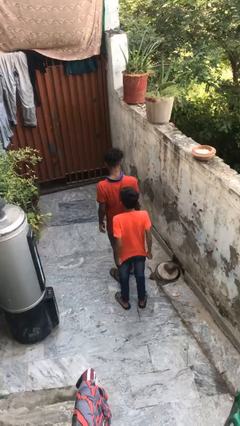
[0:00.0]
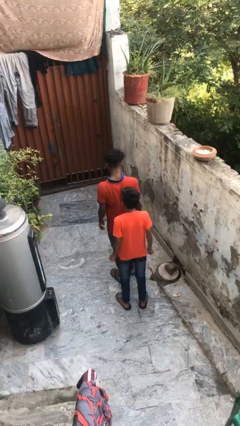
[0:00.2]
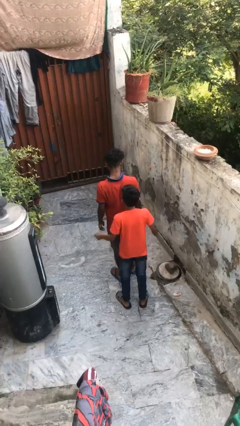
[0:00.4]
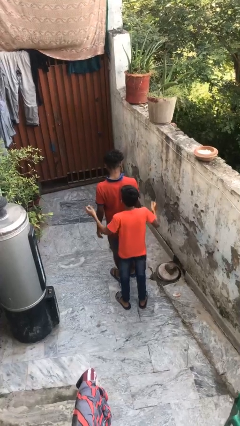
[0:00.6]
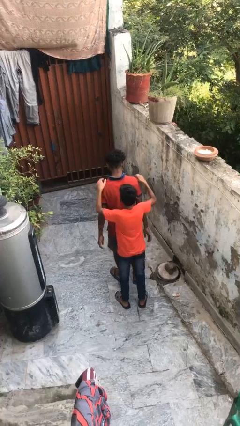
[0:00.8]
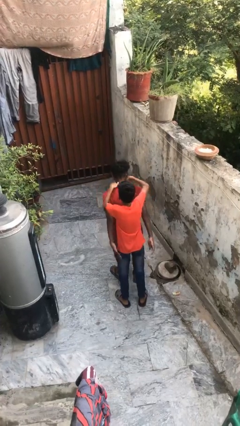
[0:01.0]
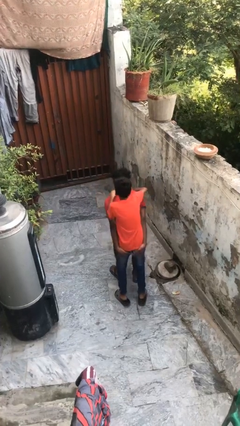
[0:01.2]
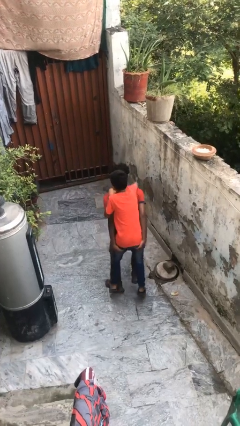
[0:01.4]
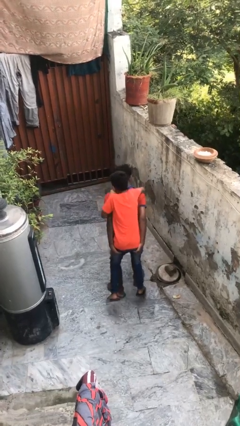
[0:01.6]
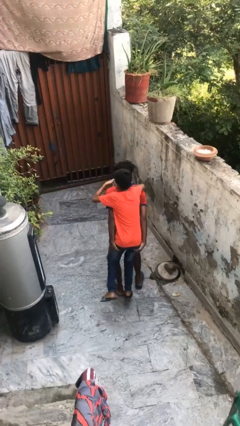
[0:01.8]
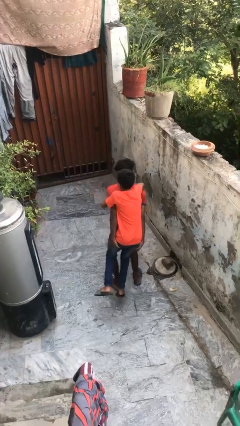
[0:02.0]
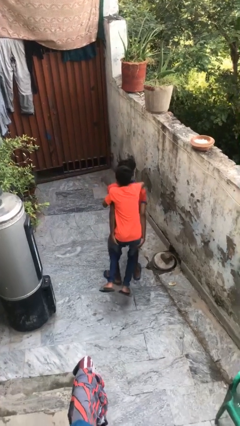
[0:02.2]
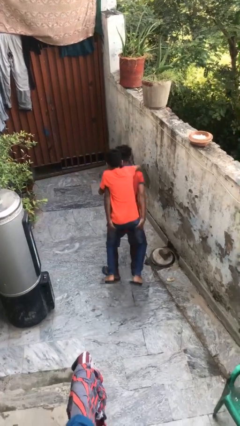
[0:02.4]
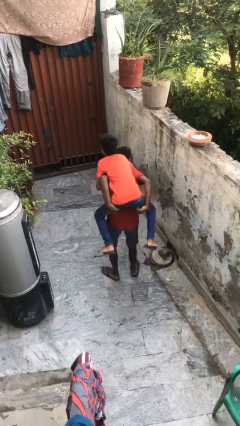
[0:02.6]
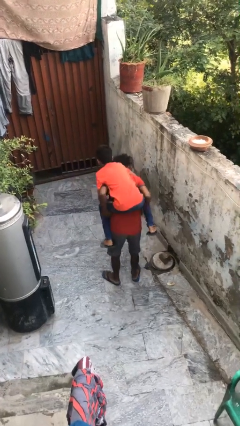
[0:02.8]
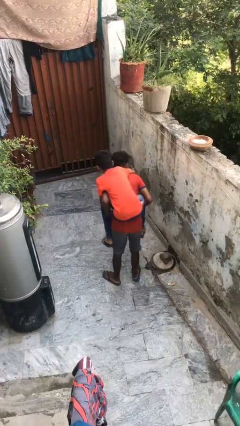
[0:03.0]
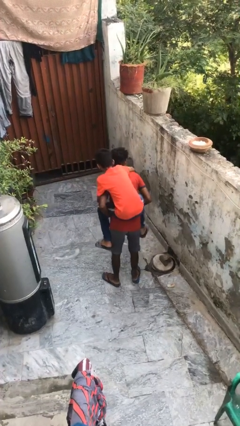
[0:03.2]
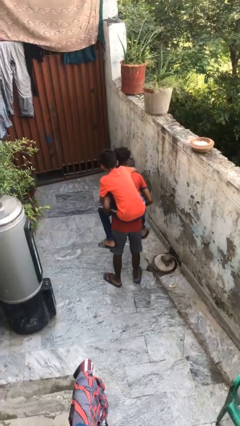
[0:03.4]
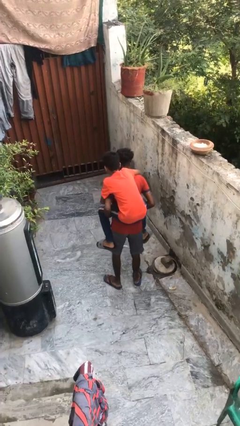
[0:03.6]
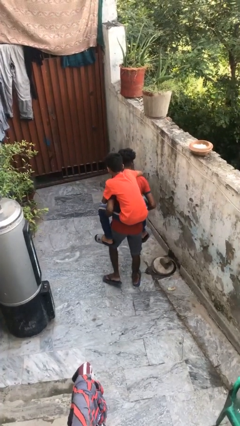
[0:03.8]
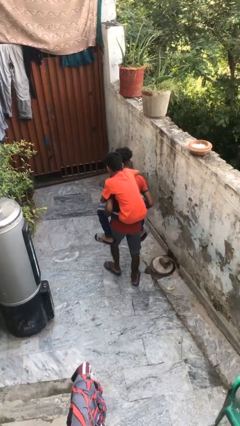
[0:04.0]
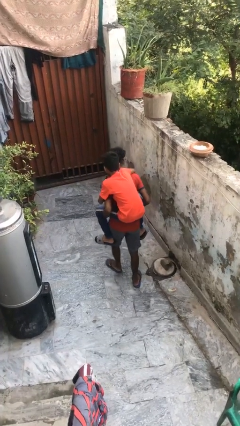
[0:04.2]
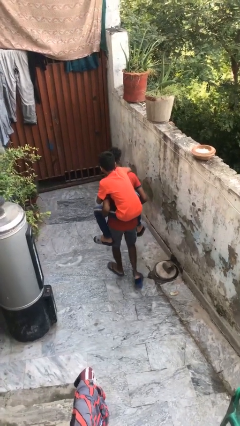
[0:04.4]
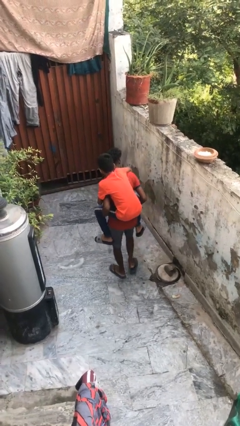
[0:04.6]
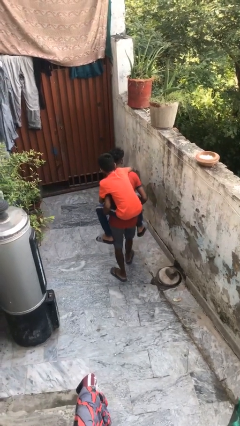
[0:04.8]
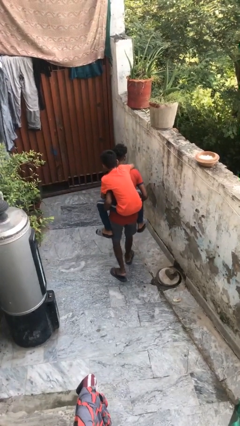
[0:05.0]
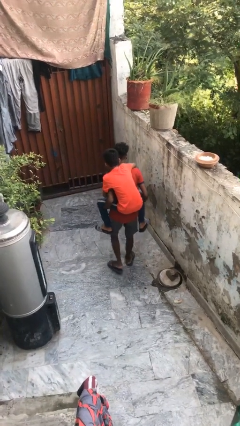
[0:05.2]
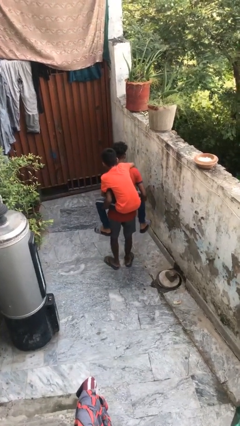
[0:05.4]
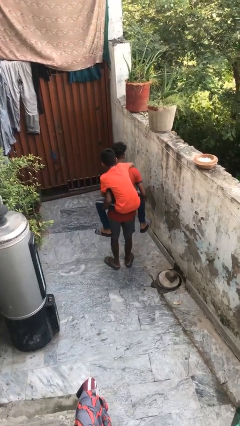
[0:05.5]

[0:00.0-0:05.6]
person carries person on back

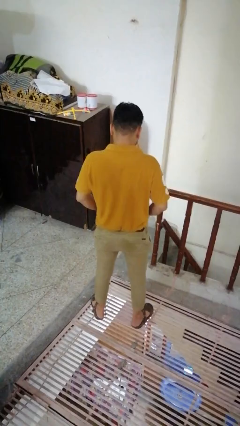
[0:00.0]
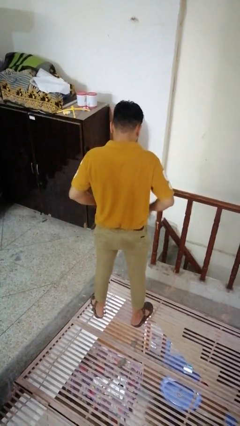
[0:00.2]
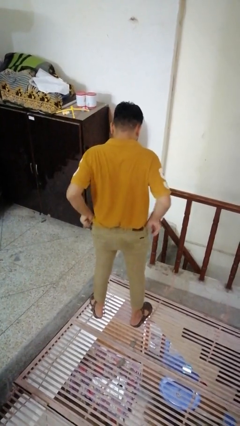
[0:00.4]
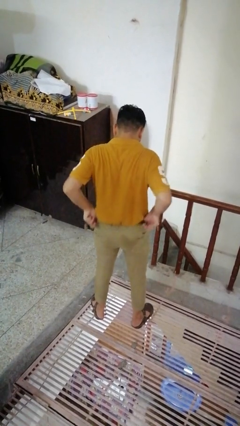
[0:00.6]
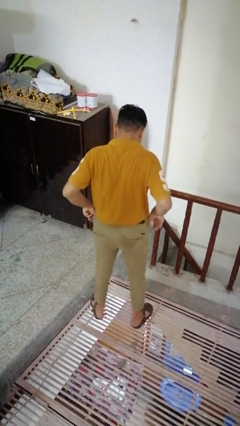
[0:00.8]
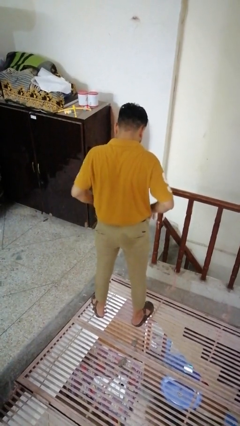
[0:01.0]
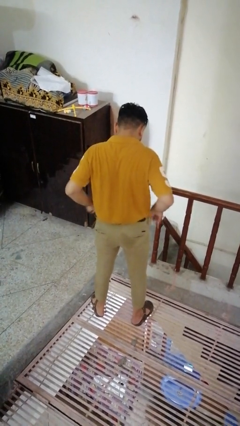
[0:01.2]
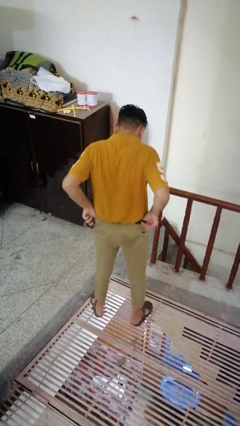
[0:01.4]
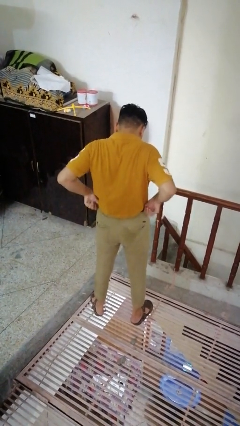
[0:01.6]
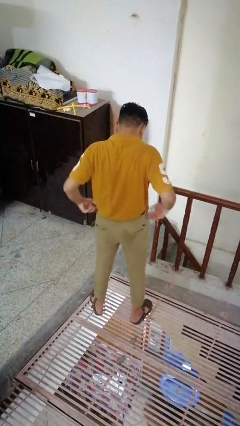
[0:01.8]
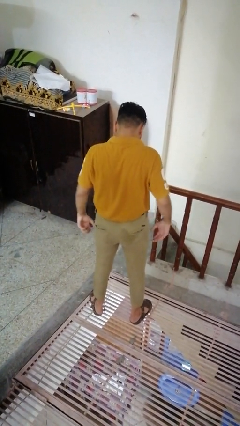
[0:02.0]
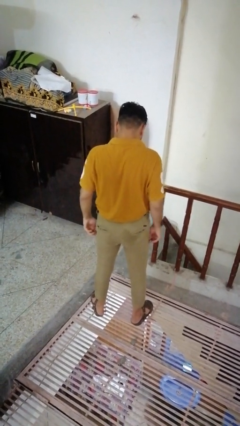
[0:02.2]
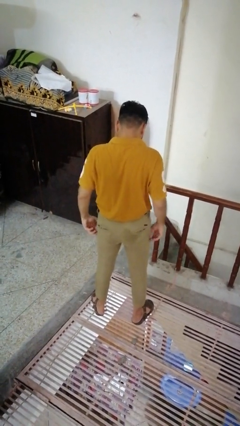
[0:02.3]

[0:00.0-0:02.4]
person hikes up pants

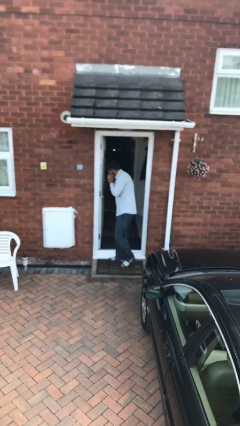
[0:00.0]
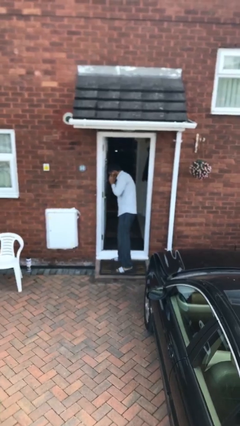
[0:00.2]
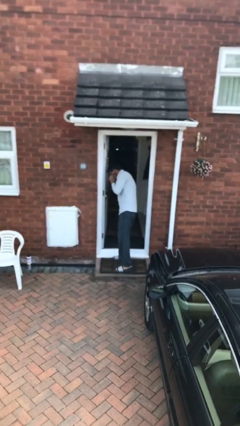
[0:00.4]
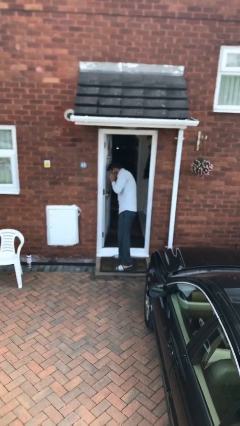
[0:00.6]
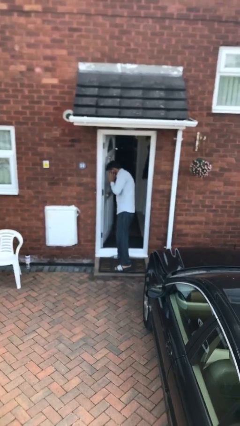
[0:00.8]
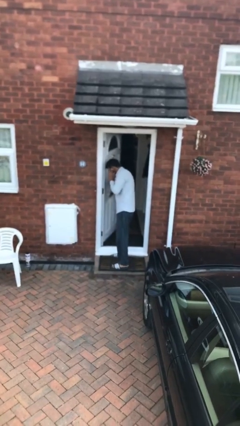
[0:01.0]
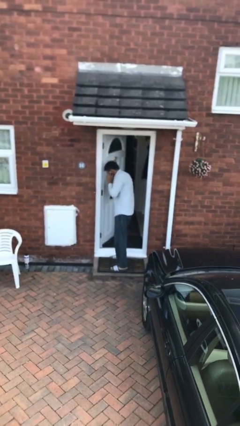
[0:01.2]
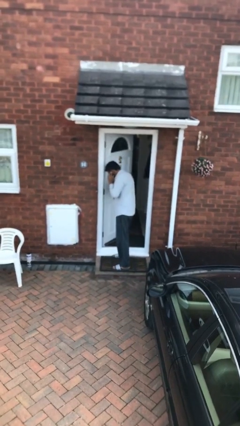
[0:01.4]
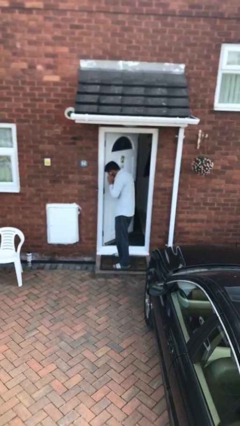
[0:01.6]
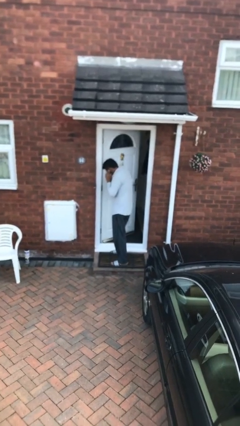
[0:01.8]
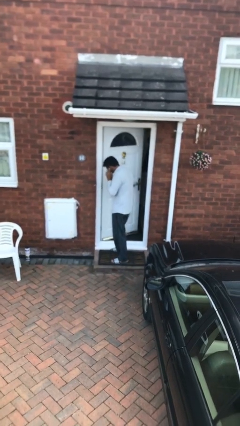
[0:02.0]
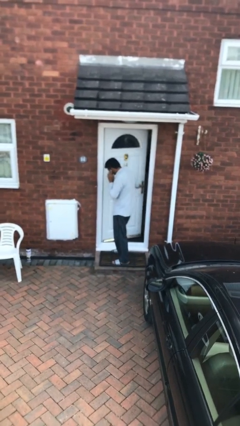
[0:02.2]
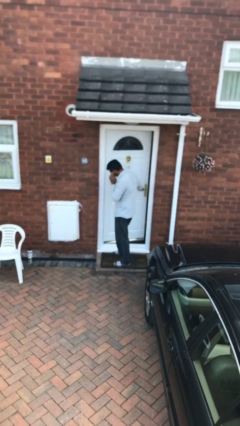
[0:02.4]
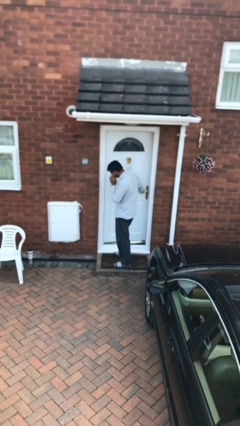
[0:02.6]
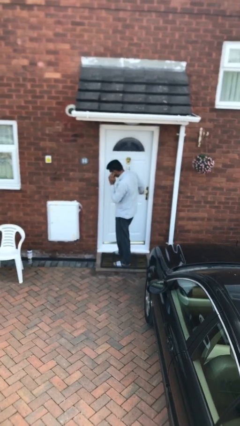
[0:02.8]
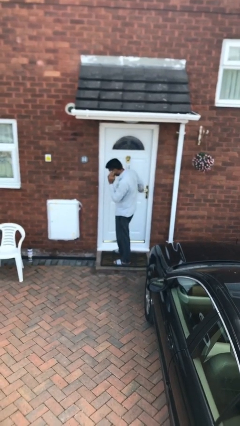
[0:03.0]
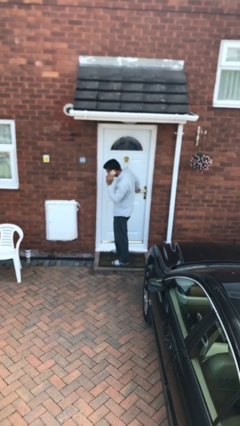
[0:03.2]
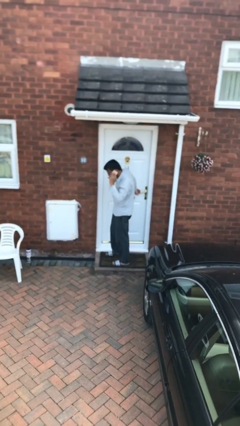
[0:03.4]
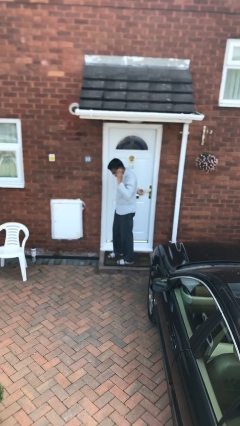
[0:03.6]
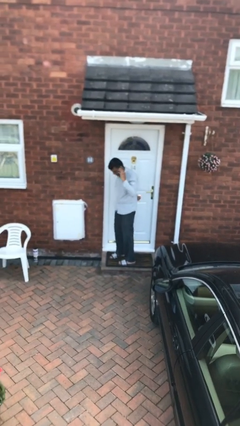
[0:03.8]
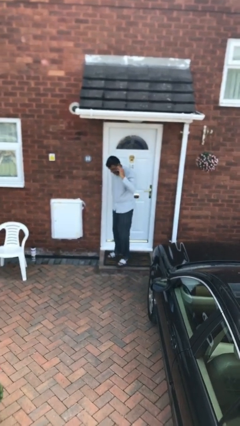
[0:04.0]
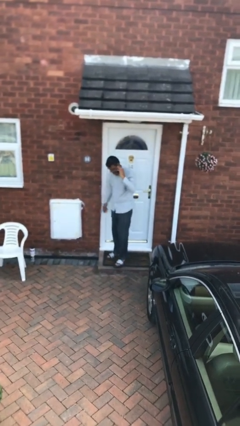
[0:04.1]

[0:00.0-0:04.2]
person closes facility door

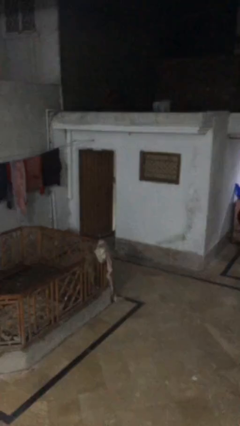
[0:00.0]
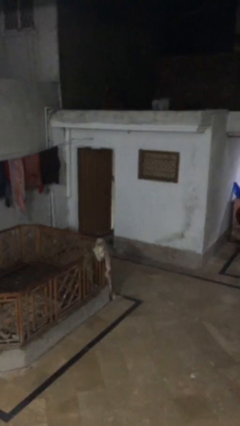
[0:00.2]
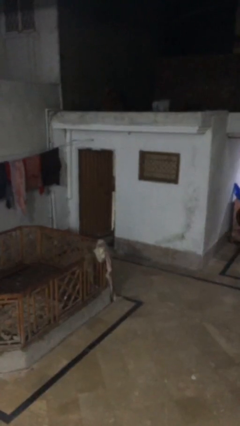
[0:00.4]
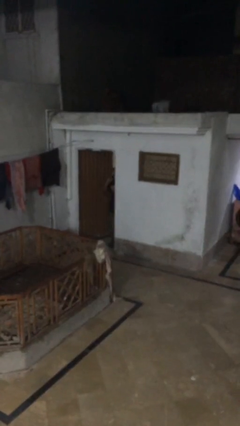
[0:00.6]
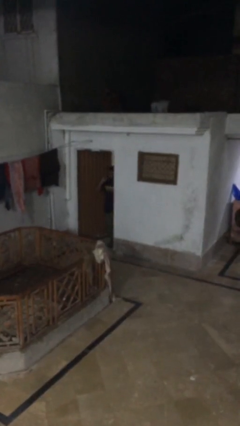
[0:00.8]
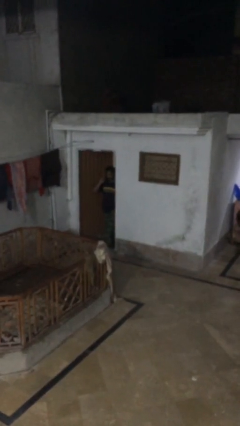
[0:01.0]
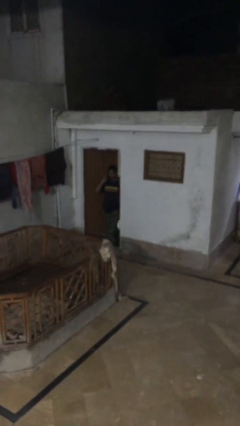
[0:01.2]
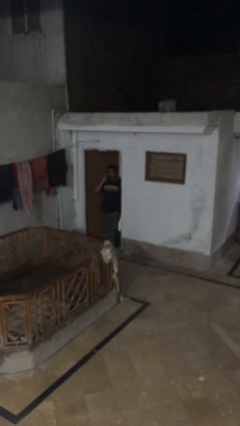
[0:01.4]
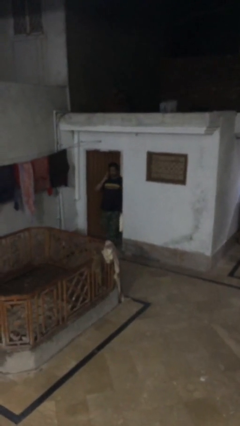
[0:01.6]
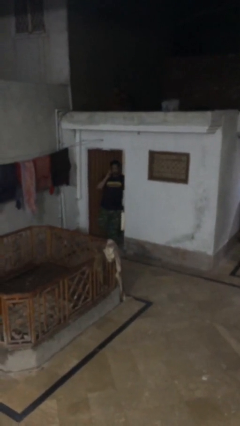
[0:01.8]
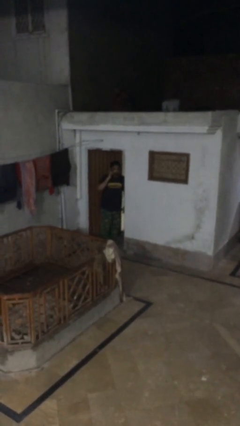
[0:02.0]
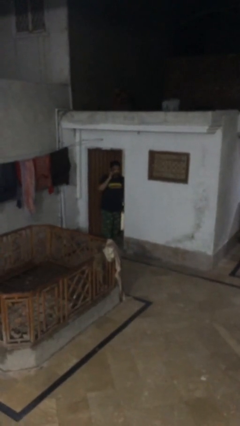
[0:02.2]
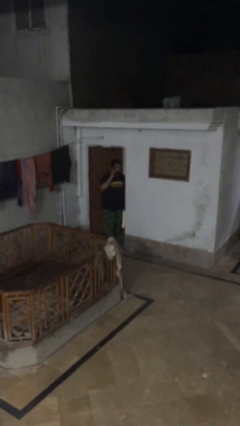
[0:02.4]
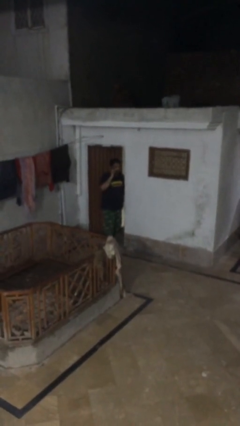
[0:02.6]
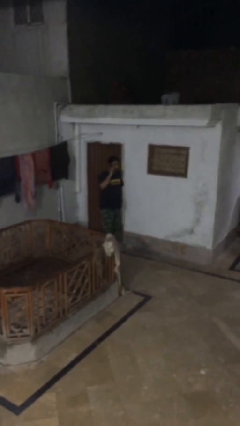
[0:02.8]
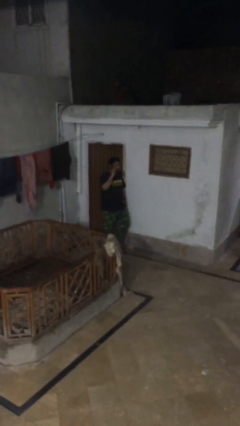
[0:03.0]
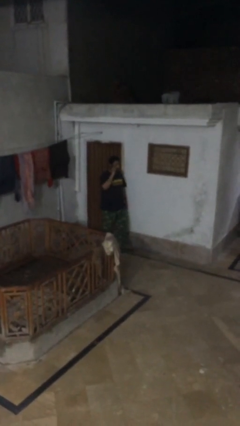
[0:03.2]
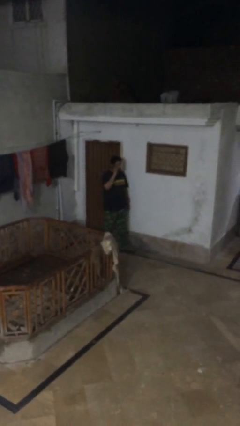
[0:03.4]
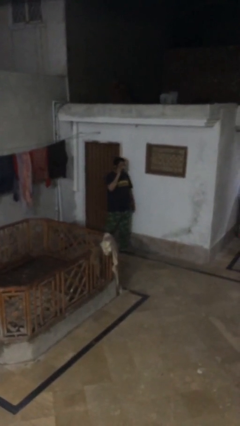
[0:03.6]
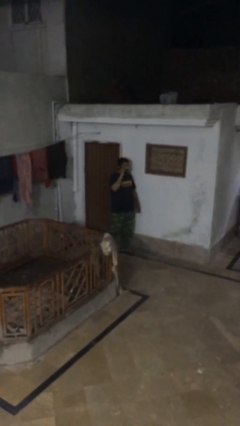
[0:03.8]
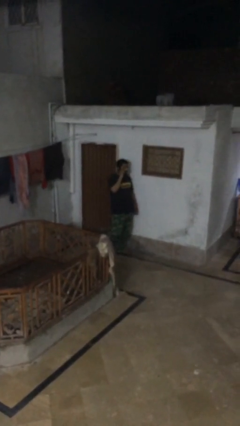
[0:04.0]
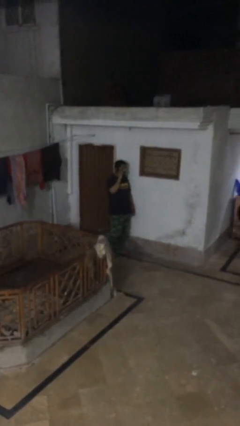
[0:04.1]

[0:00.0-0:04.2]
person enters scene through structure

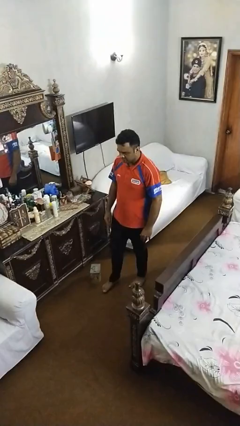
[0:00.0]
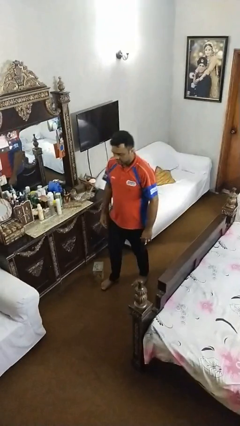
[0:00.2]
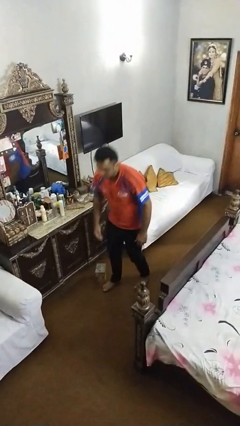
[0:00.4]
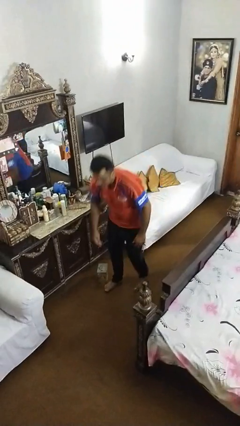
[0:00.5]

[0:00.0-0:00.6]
person trips on object on floor

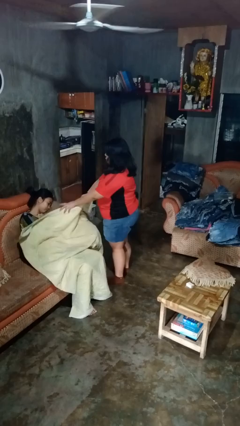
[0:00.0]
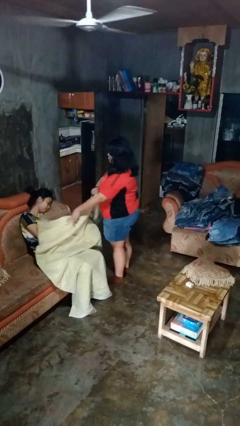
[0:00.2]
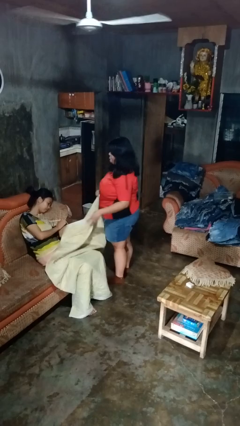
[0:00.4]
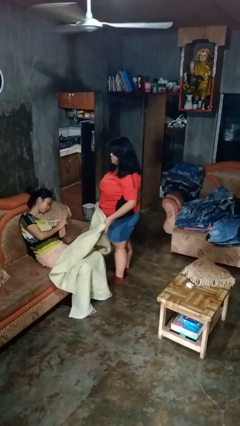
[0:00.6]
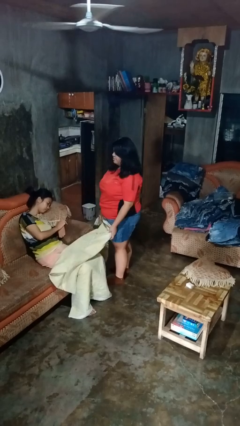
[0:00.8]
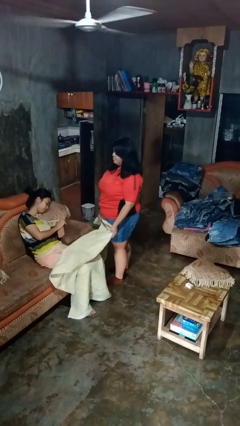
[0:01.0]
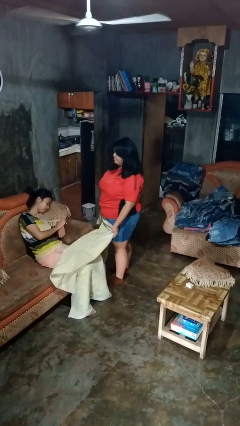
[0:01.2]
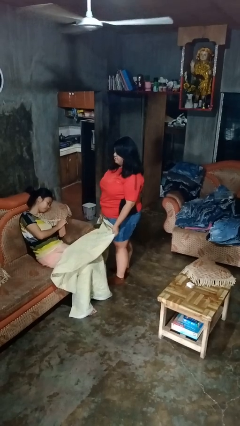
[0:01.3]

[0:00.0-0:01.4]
person uncovers friend with blanket
